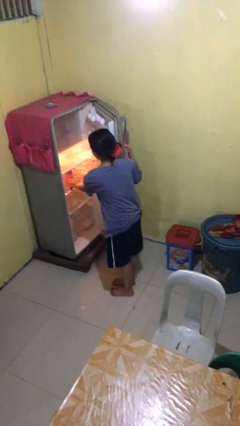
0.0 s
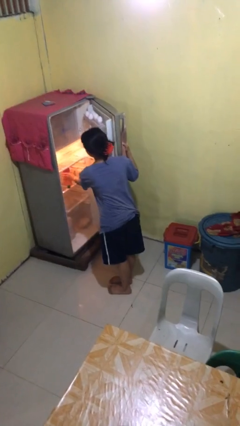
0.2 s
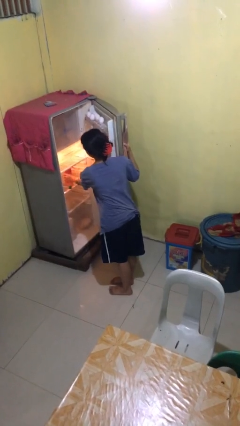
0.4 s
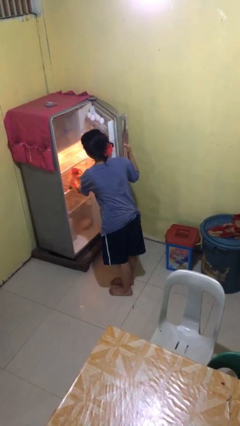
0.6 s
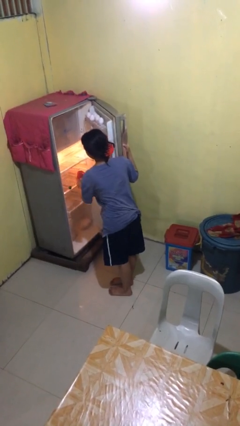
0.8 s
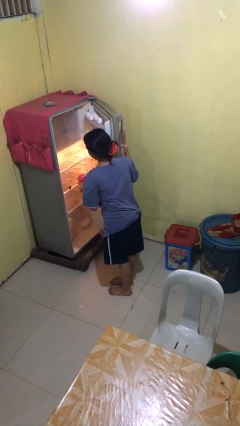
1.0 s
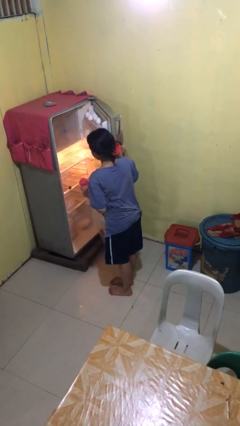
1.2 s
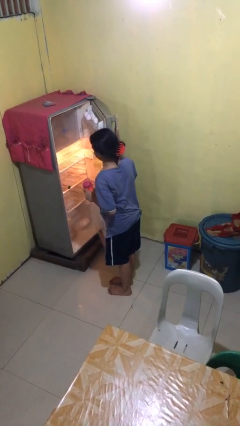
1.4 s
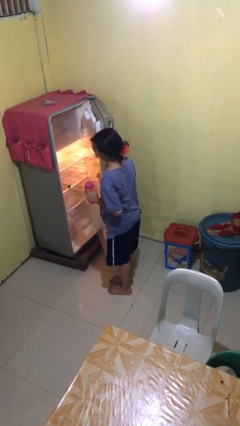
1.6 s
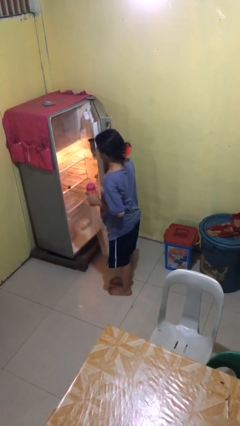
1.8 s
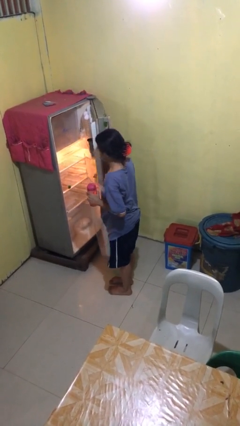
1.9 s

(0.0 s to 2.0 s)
person takes object from refrigerator

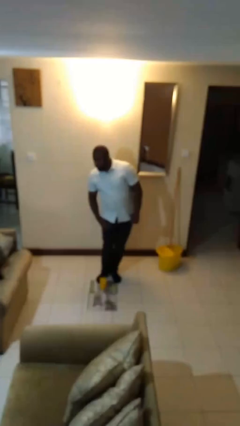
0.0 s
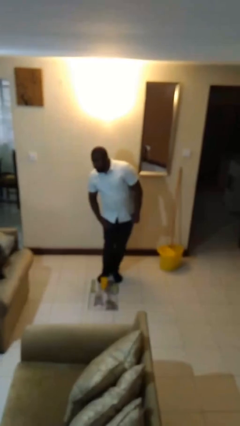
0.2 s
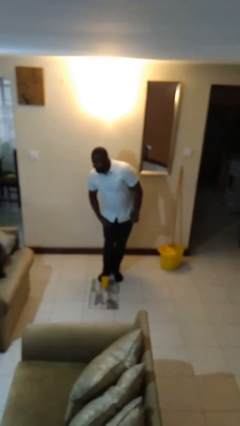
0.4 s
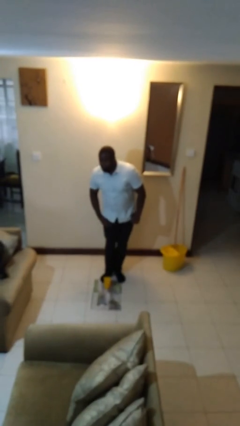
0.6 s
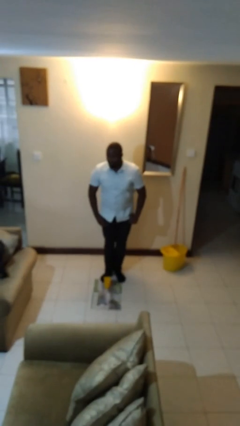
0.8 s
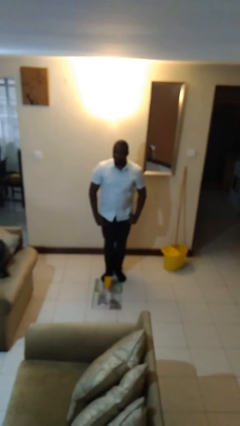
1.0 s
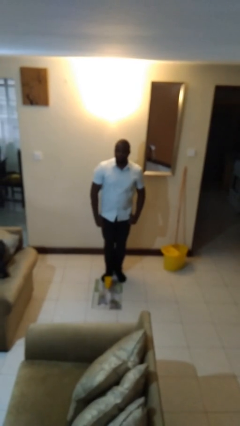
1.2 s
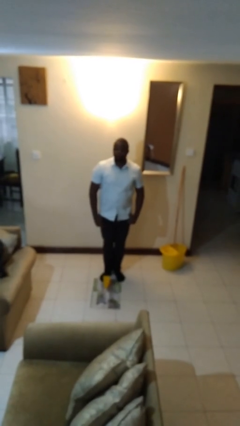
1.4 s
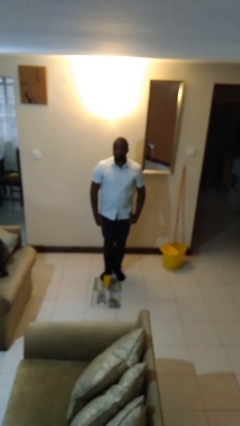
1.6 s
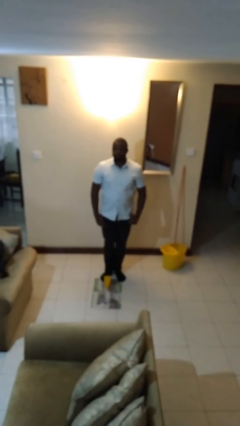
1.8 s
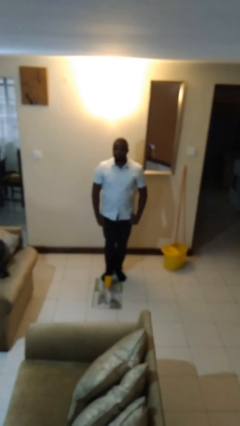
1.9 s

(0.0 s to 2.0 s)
person sets upright glass

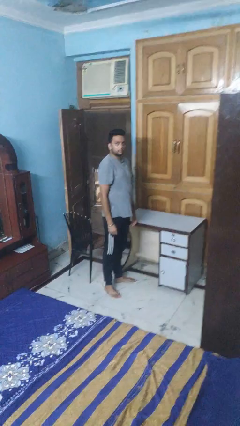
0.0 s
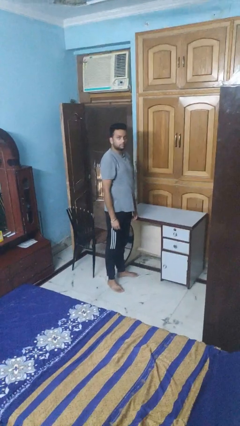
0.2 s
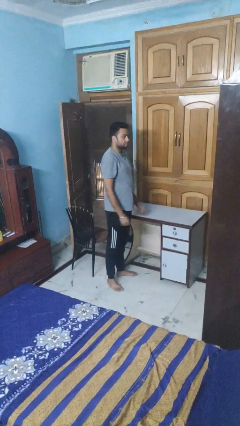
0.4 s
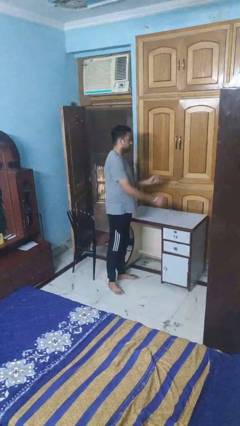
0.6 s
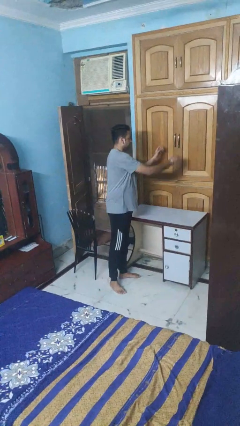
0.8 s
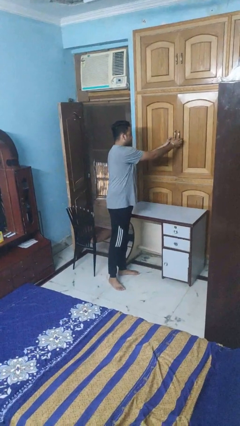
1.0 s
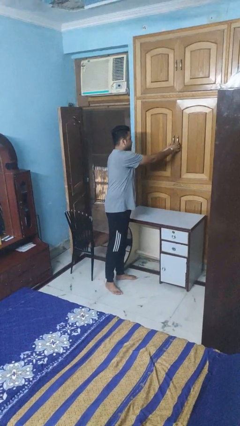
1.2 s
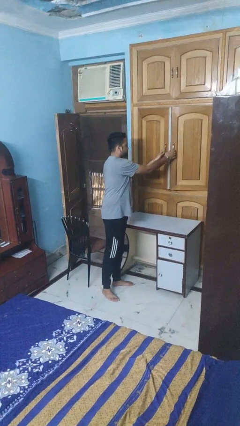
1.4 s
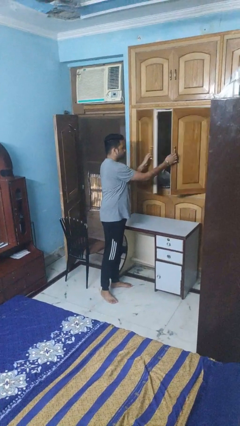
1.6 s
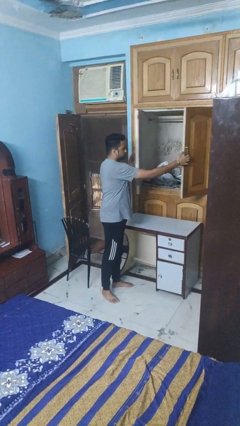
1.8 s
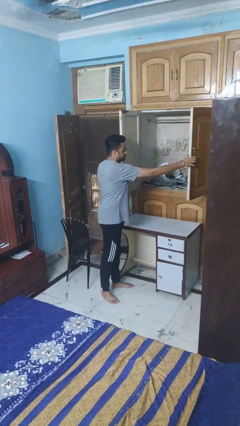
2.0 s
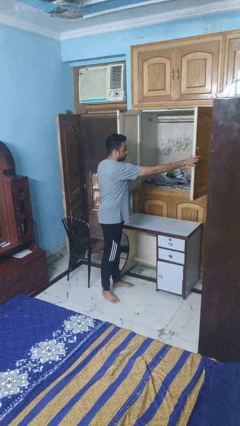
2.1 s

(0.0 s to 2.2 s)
person opens closet door

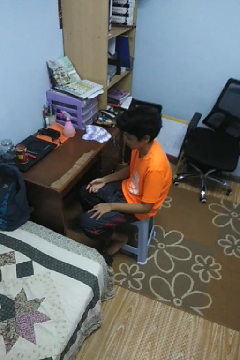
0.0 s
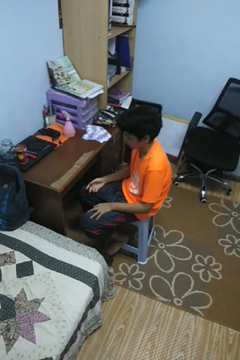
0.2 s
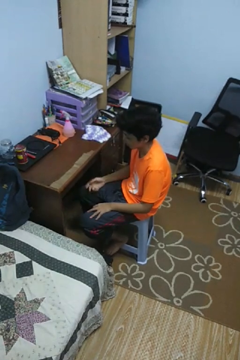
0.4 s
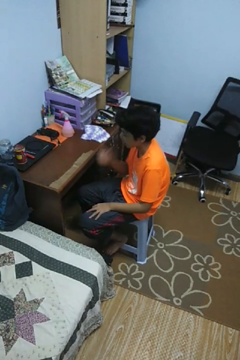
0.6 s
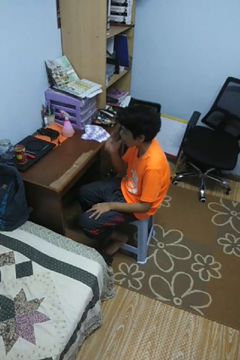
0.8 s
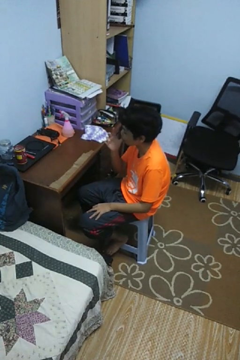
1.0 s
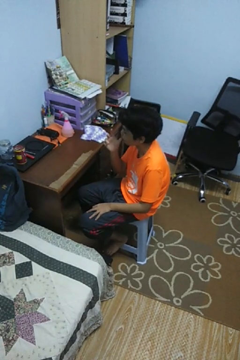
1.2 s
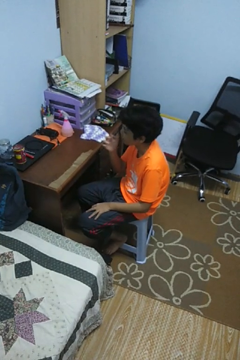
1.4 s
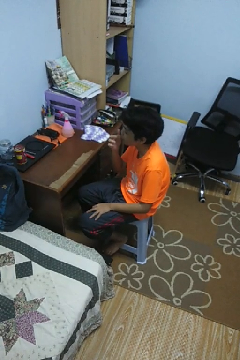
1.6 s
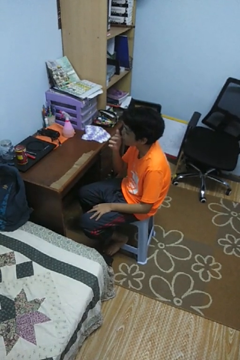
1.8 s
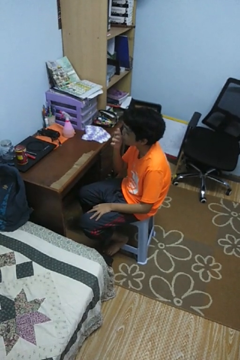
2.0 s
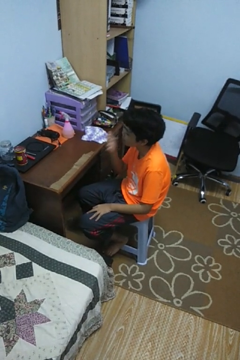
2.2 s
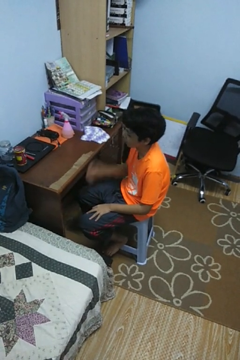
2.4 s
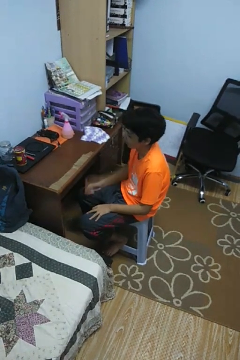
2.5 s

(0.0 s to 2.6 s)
person licks fingers

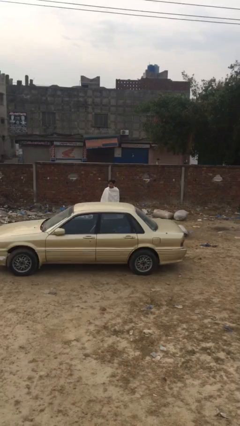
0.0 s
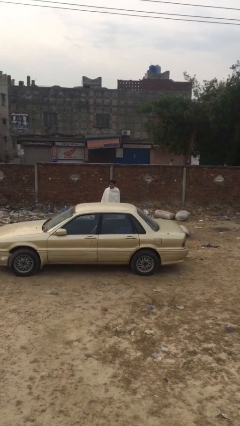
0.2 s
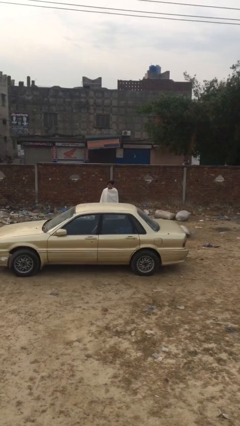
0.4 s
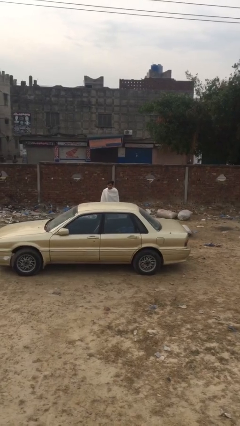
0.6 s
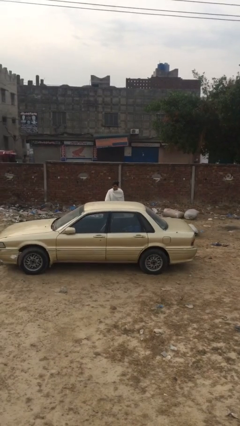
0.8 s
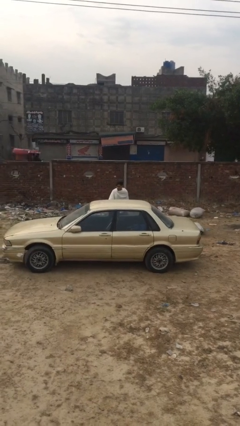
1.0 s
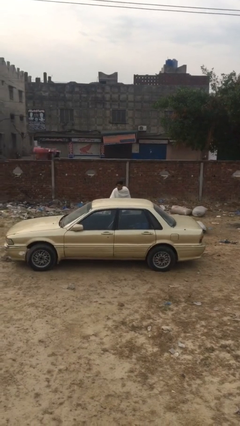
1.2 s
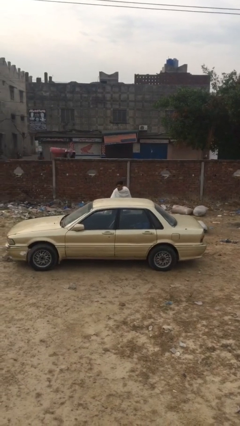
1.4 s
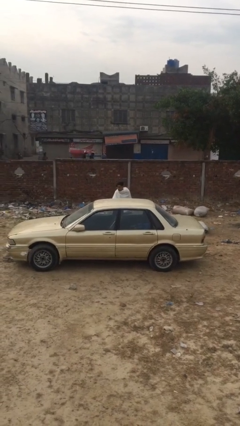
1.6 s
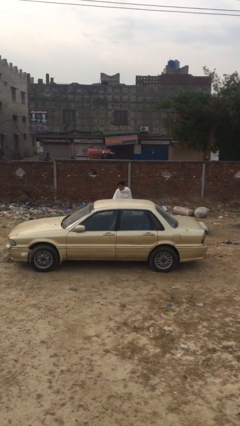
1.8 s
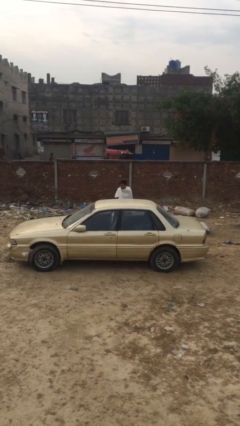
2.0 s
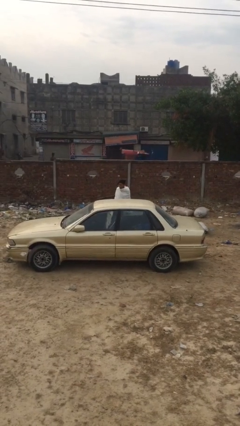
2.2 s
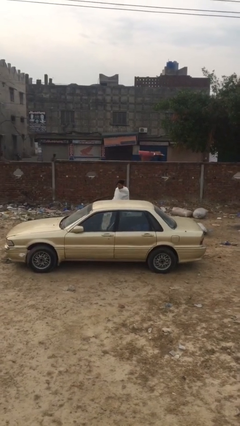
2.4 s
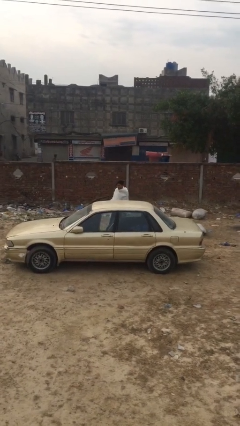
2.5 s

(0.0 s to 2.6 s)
person opens car door

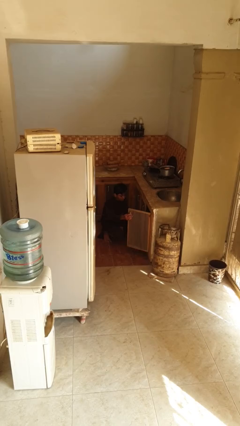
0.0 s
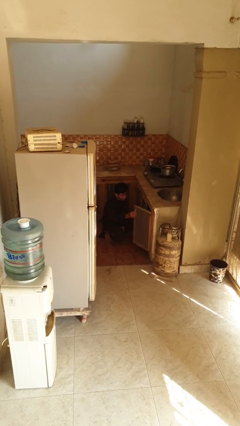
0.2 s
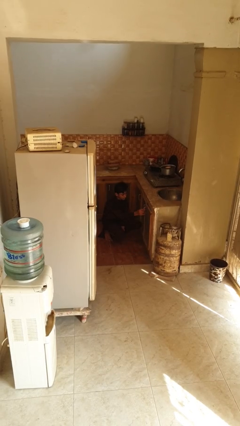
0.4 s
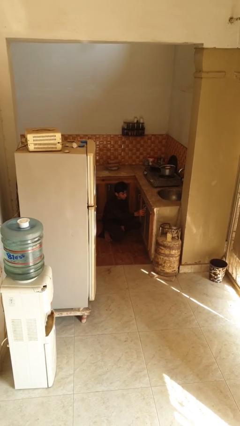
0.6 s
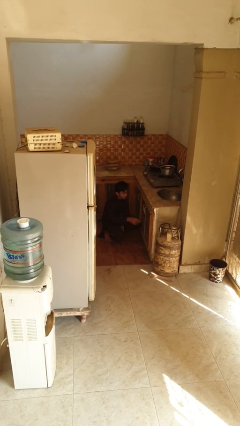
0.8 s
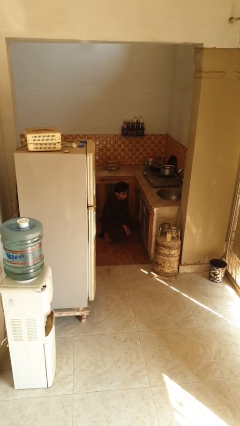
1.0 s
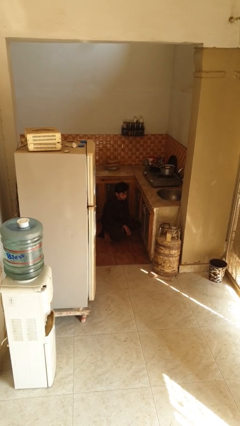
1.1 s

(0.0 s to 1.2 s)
person closes kitchen drawer

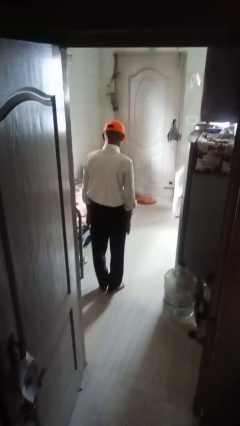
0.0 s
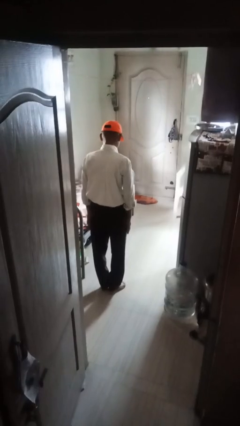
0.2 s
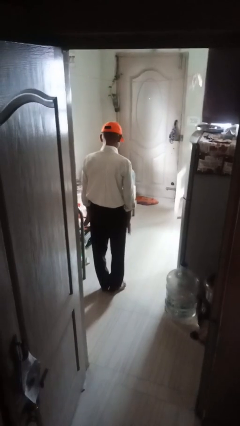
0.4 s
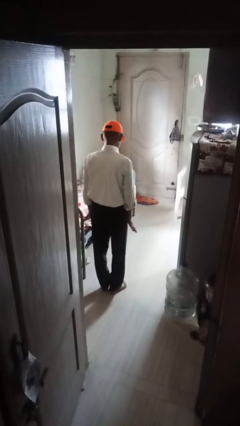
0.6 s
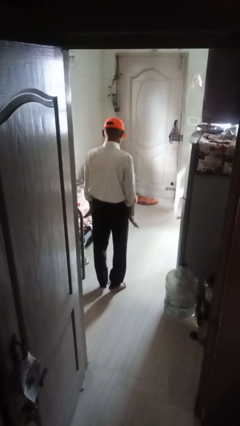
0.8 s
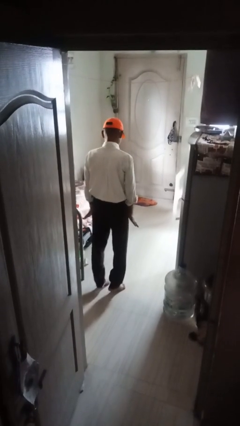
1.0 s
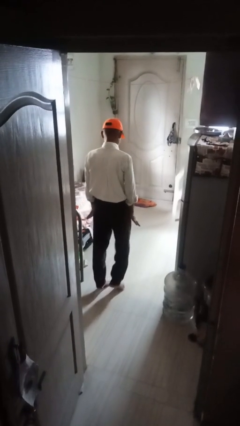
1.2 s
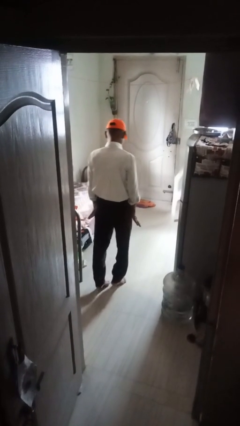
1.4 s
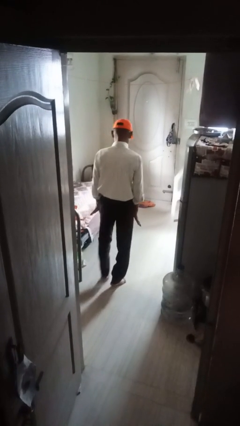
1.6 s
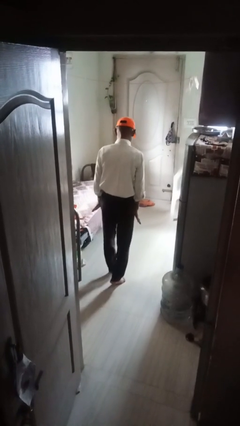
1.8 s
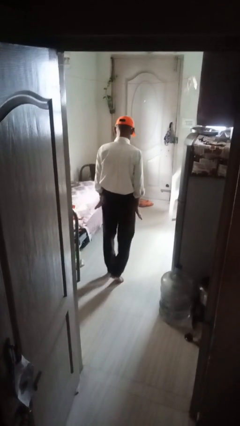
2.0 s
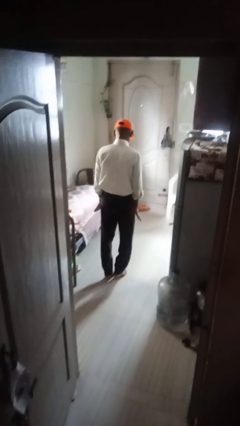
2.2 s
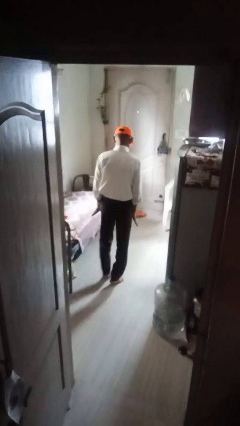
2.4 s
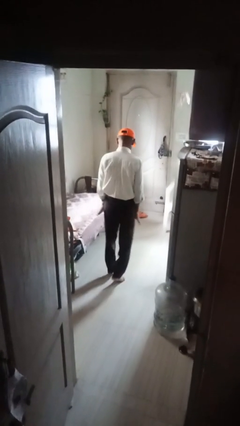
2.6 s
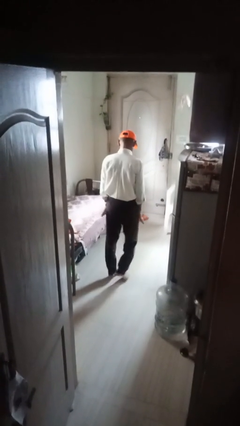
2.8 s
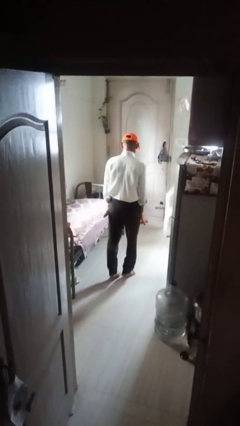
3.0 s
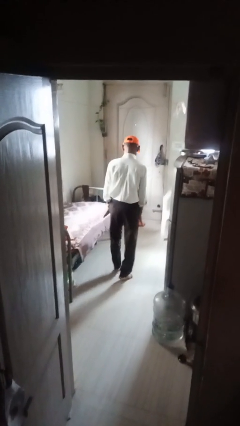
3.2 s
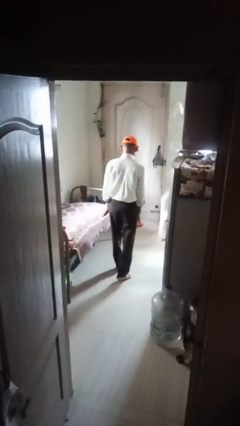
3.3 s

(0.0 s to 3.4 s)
person walks tiptoe

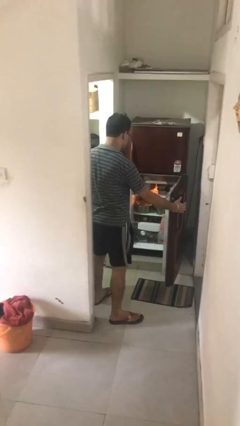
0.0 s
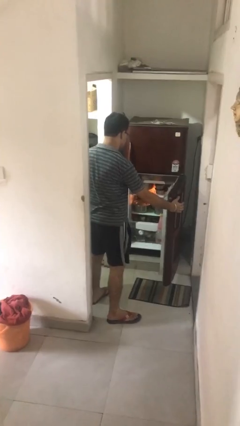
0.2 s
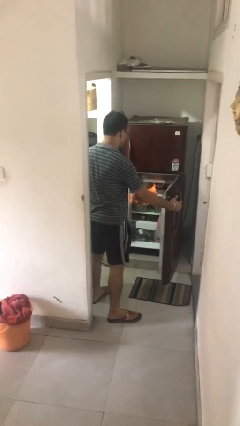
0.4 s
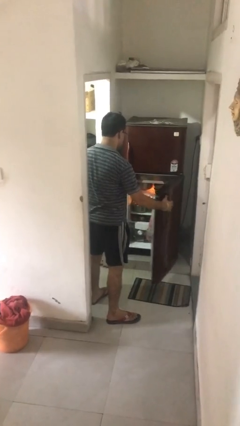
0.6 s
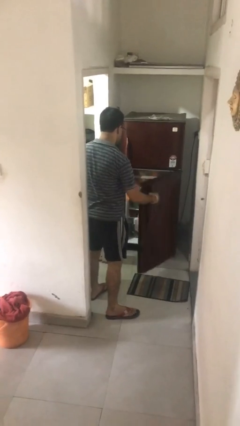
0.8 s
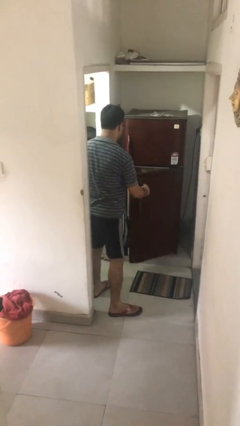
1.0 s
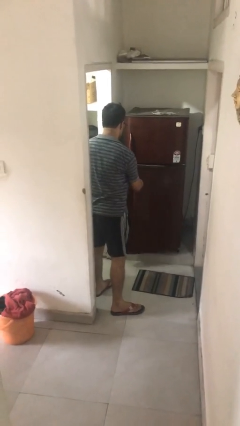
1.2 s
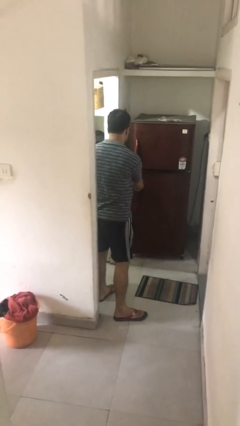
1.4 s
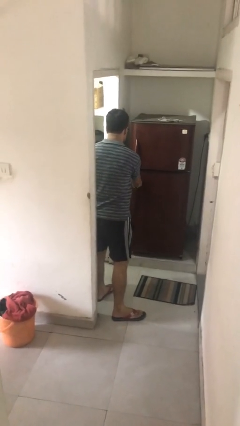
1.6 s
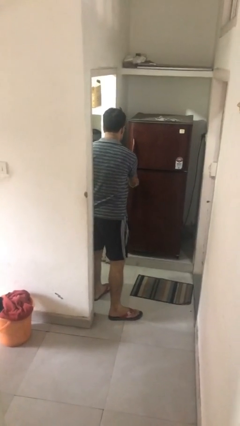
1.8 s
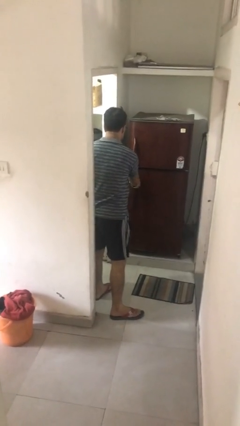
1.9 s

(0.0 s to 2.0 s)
person closes refrigerator
